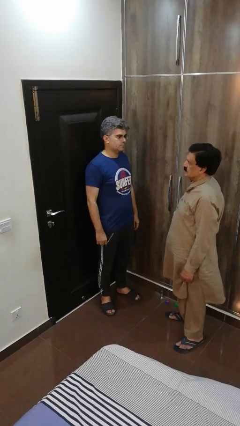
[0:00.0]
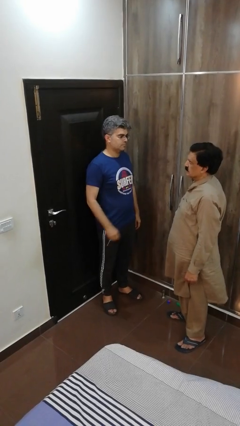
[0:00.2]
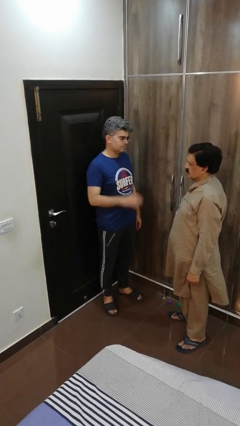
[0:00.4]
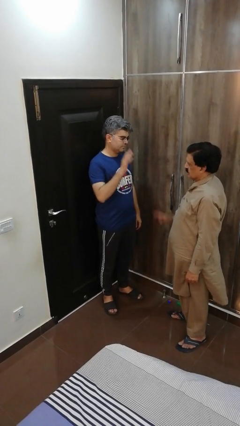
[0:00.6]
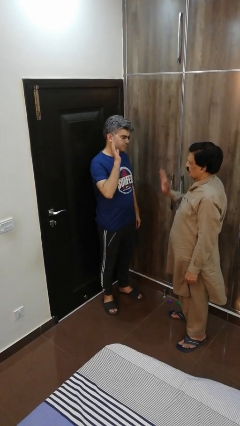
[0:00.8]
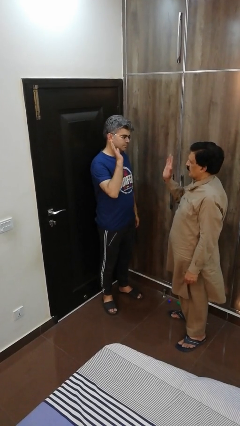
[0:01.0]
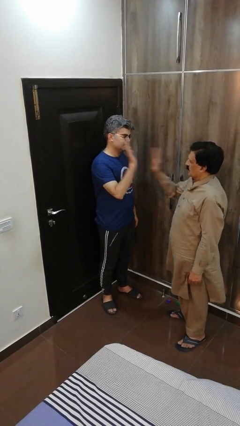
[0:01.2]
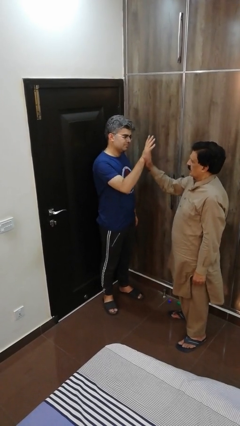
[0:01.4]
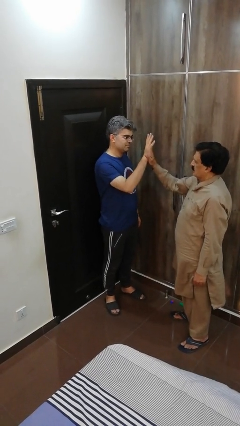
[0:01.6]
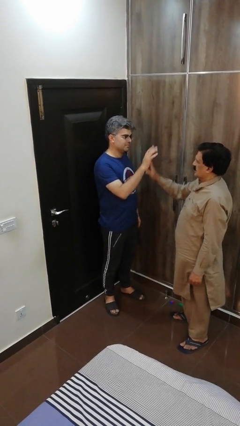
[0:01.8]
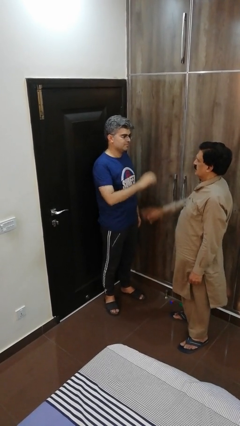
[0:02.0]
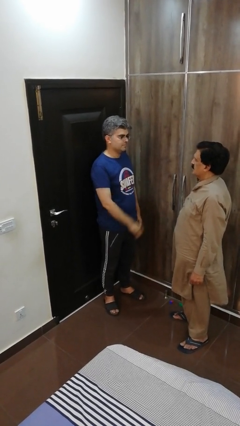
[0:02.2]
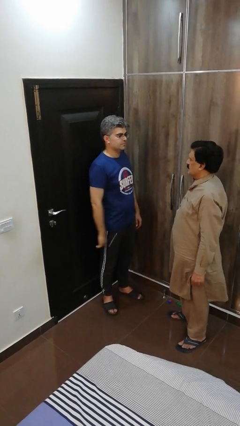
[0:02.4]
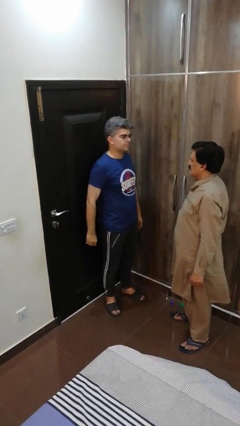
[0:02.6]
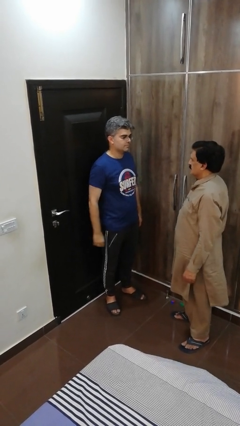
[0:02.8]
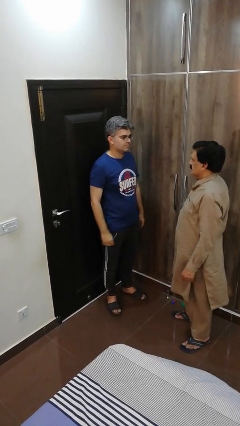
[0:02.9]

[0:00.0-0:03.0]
person highfives hand

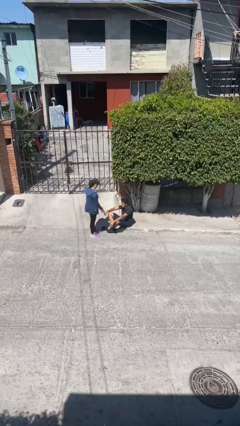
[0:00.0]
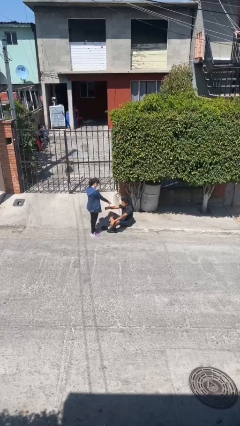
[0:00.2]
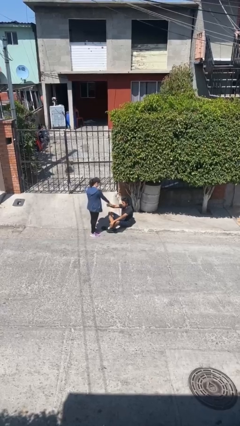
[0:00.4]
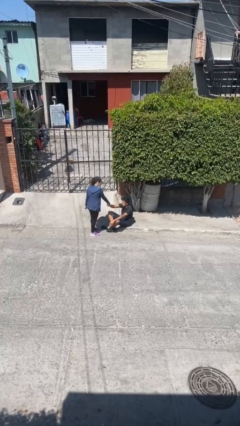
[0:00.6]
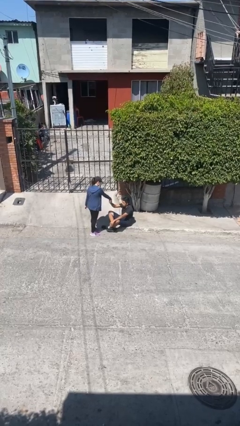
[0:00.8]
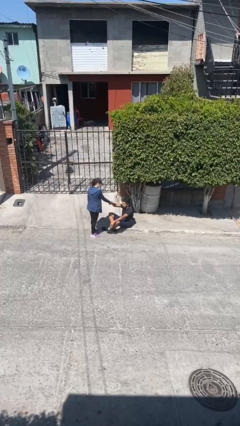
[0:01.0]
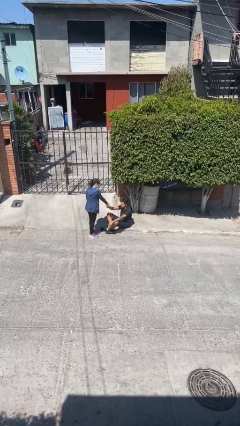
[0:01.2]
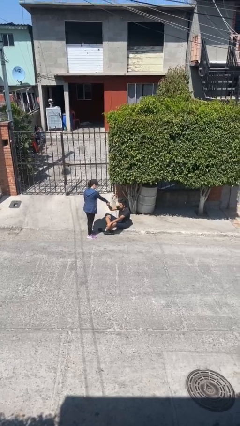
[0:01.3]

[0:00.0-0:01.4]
person shakes hand

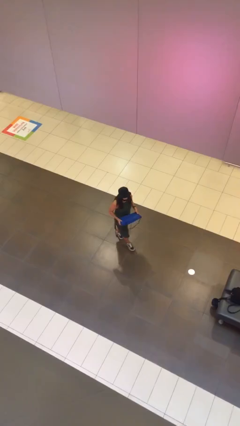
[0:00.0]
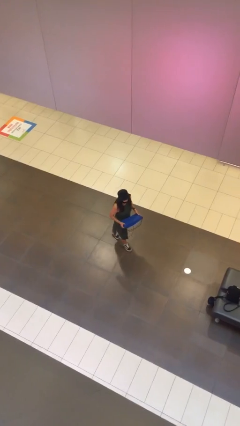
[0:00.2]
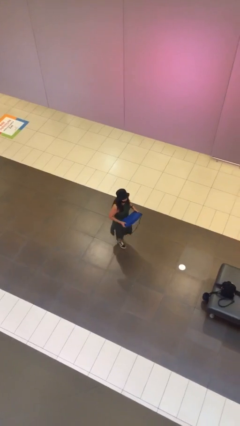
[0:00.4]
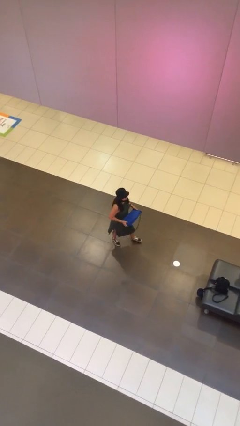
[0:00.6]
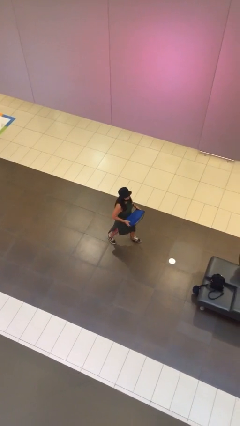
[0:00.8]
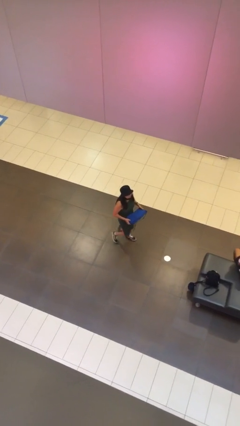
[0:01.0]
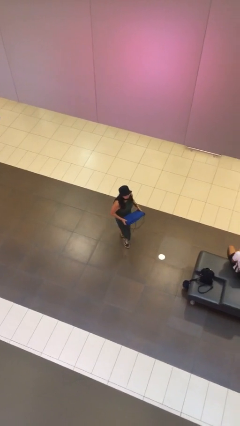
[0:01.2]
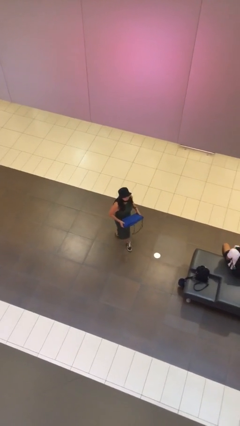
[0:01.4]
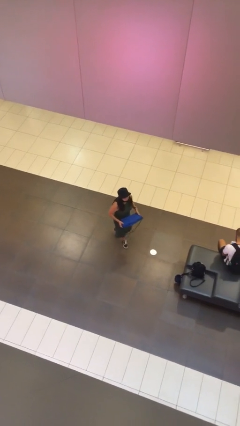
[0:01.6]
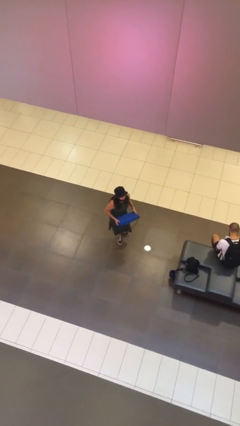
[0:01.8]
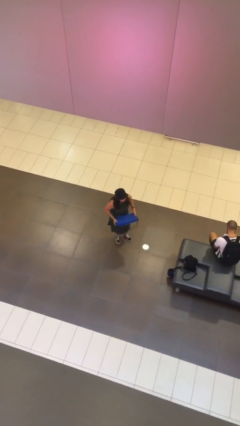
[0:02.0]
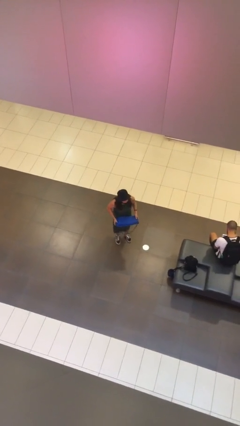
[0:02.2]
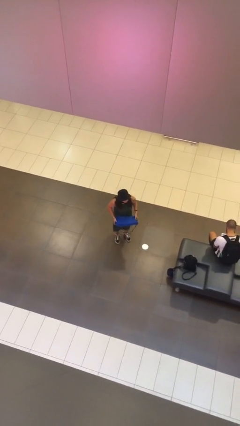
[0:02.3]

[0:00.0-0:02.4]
person carries heavy object

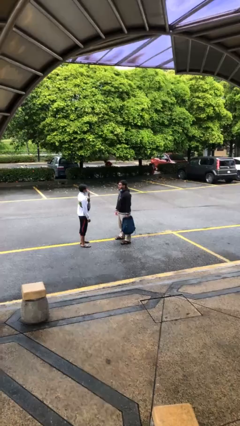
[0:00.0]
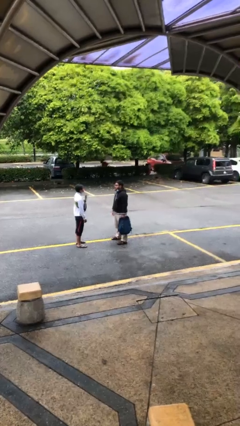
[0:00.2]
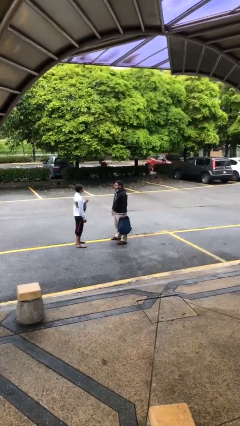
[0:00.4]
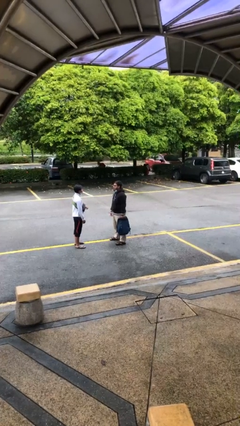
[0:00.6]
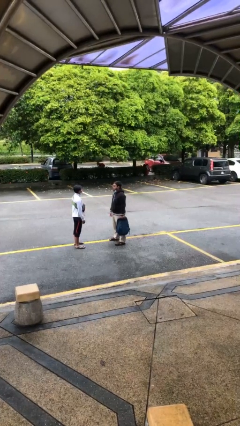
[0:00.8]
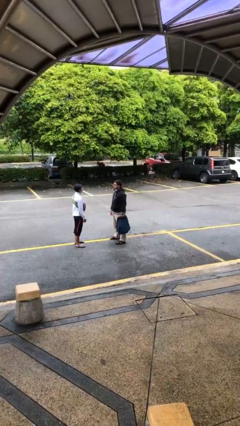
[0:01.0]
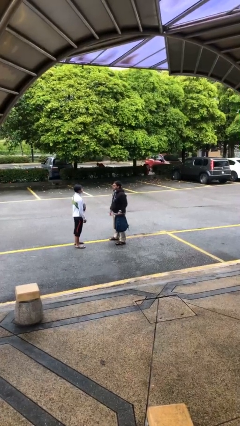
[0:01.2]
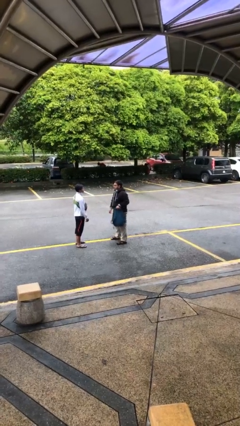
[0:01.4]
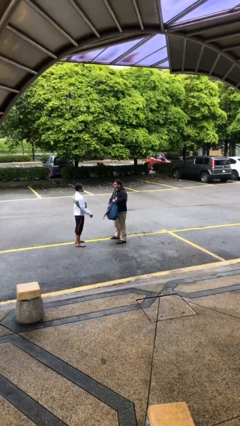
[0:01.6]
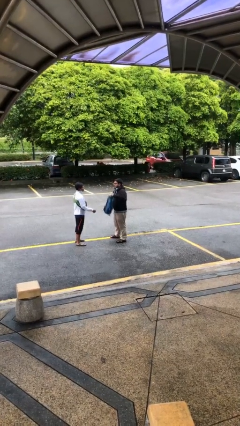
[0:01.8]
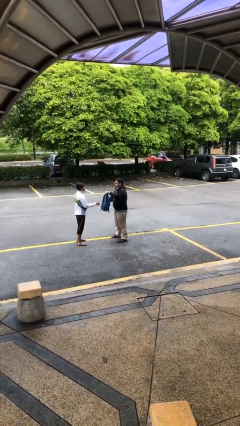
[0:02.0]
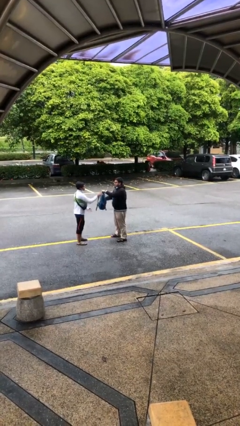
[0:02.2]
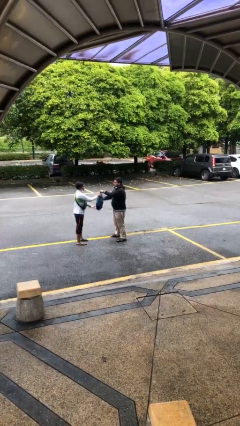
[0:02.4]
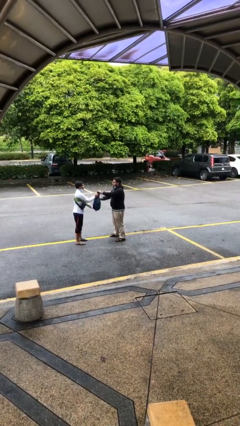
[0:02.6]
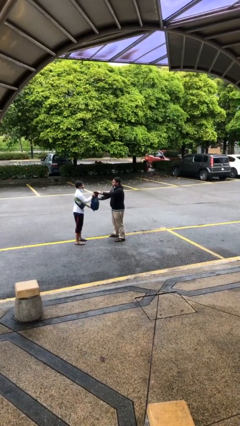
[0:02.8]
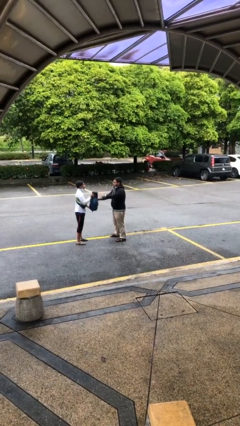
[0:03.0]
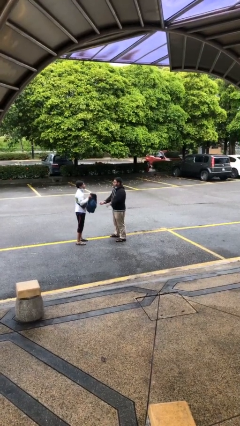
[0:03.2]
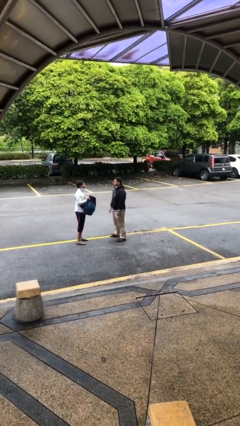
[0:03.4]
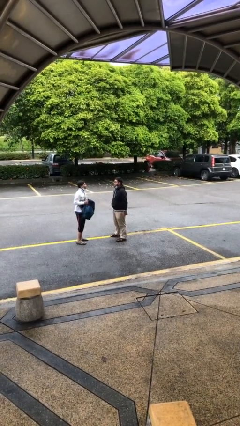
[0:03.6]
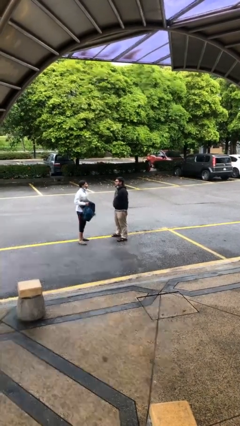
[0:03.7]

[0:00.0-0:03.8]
person transfers object to person

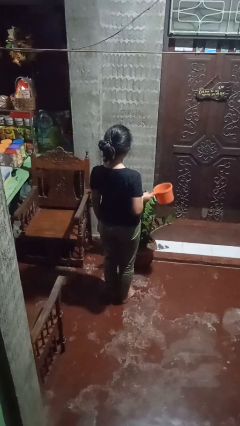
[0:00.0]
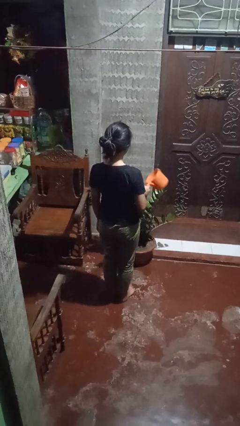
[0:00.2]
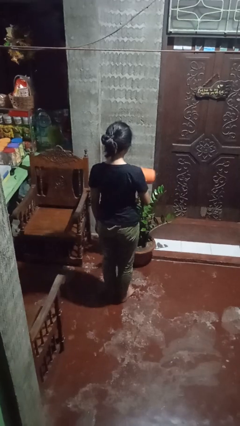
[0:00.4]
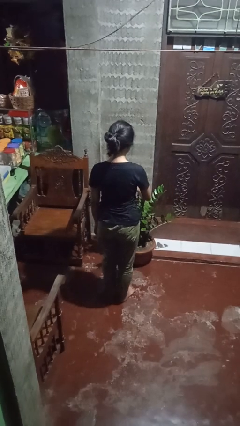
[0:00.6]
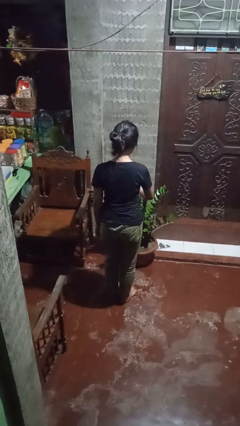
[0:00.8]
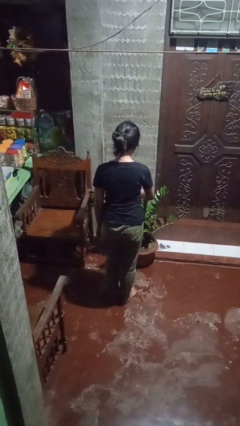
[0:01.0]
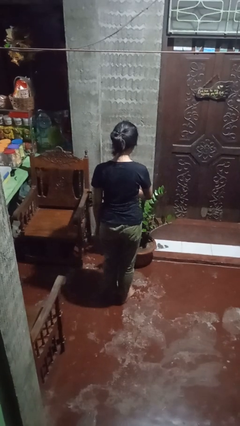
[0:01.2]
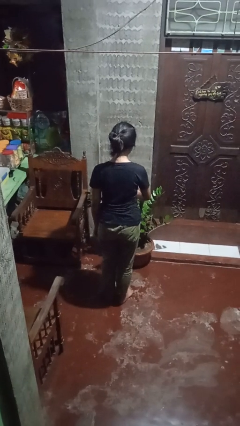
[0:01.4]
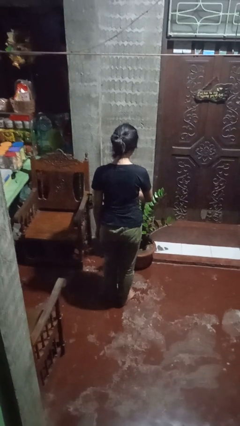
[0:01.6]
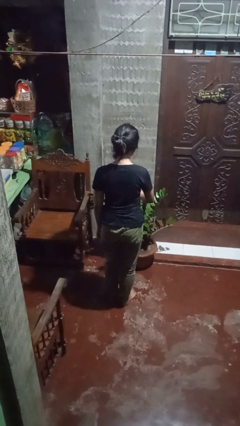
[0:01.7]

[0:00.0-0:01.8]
person waters houseplant

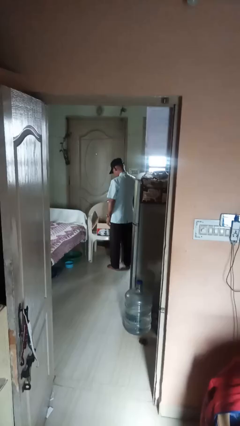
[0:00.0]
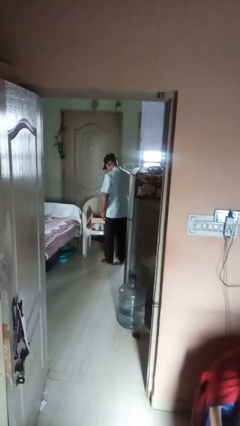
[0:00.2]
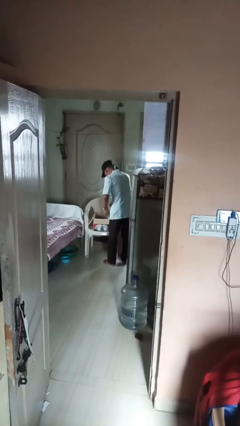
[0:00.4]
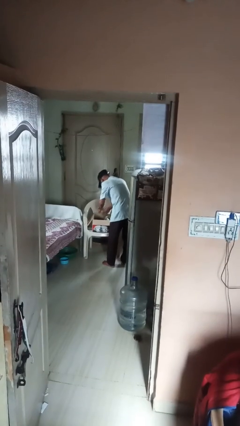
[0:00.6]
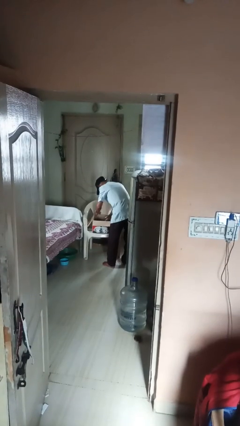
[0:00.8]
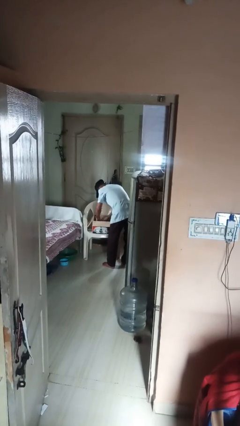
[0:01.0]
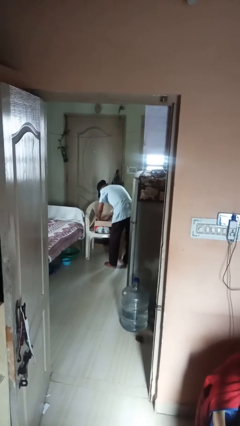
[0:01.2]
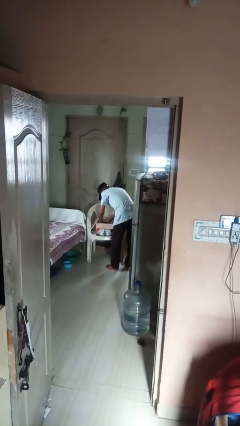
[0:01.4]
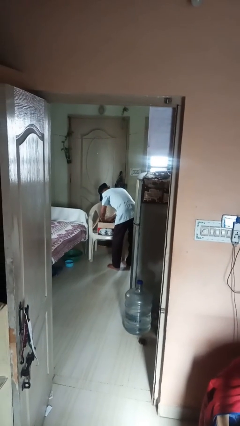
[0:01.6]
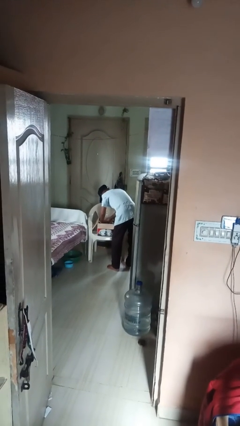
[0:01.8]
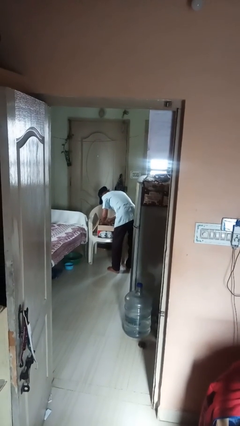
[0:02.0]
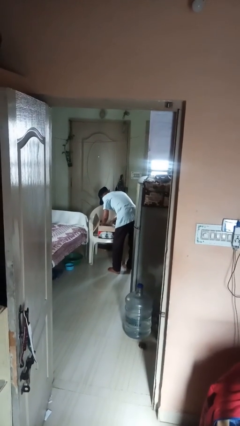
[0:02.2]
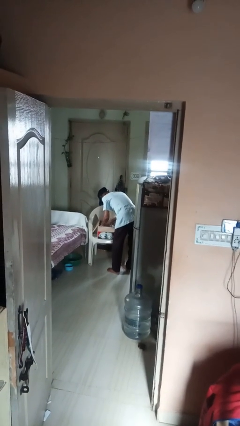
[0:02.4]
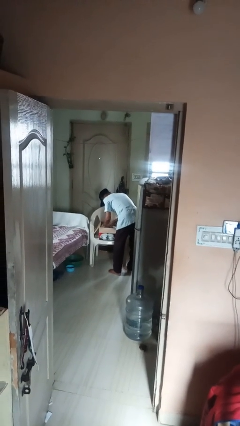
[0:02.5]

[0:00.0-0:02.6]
person searches in box

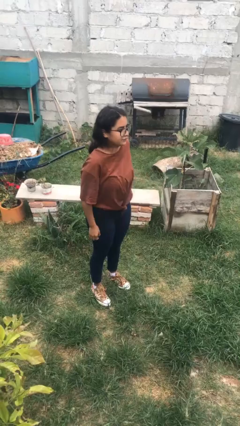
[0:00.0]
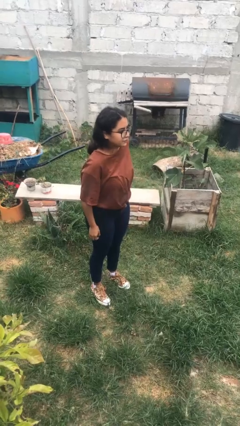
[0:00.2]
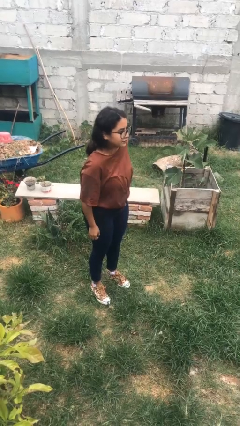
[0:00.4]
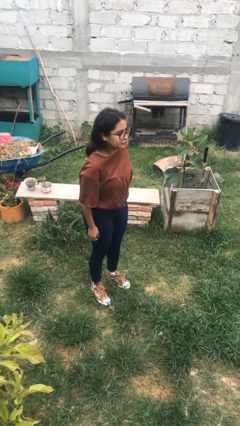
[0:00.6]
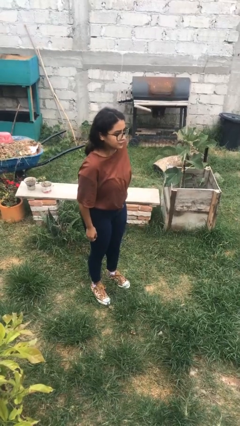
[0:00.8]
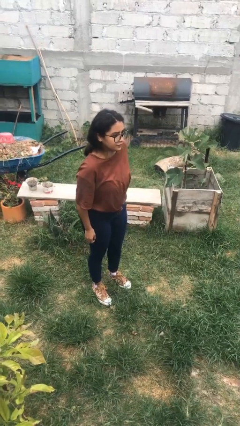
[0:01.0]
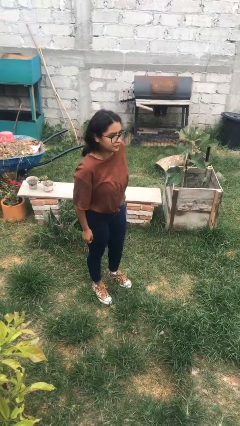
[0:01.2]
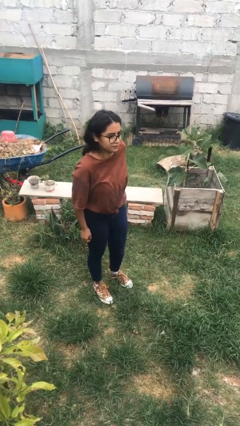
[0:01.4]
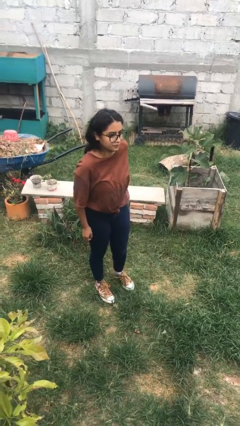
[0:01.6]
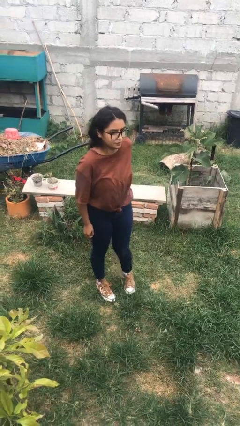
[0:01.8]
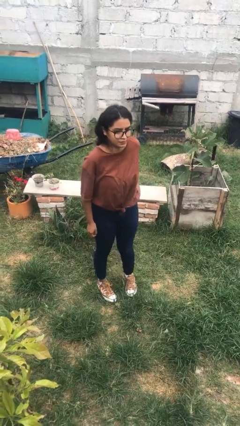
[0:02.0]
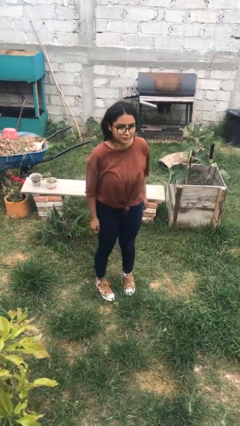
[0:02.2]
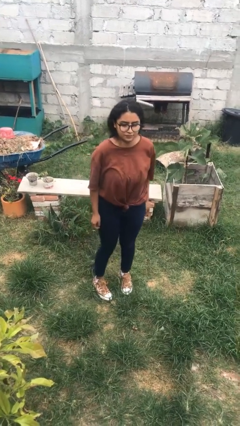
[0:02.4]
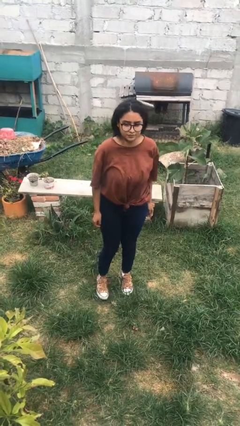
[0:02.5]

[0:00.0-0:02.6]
person puts phone into pocket
